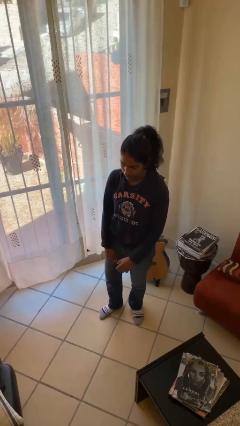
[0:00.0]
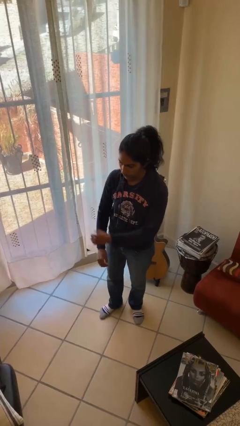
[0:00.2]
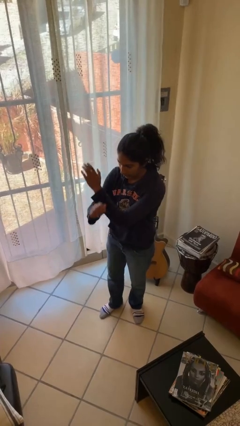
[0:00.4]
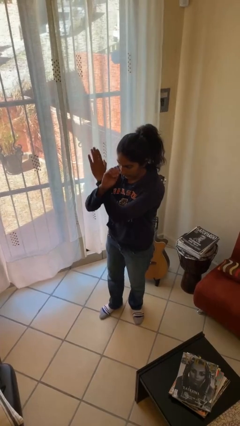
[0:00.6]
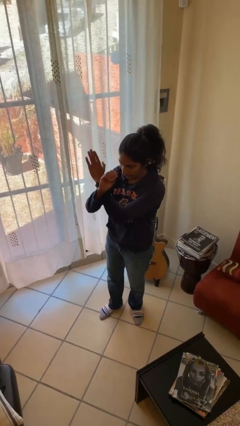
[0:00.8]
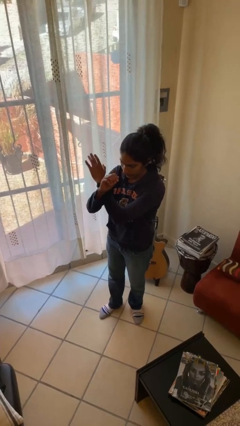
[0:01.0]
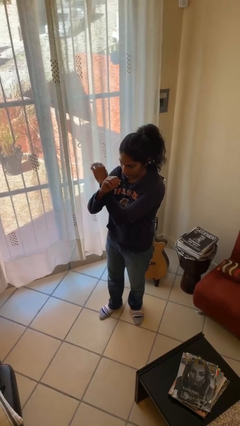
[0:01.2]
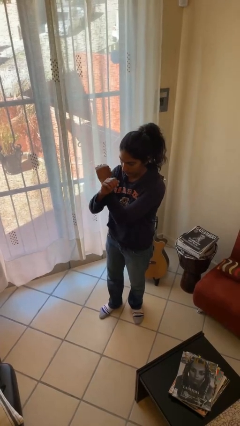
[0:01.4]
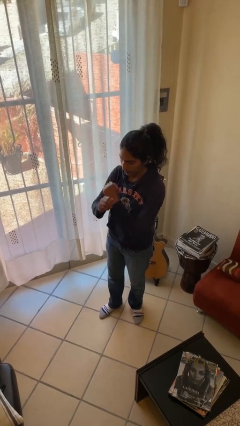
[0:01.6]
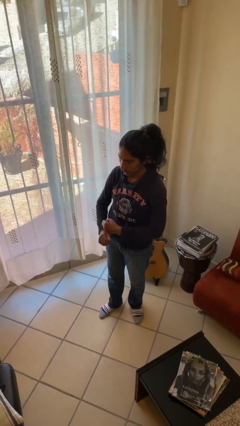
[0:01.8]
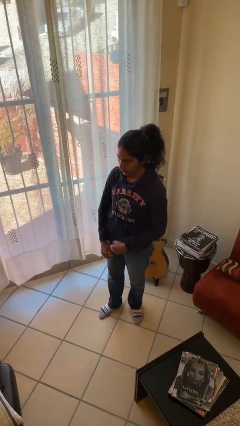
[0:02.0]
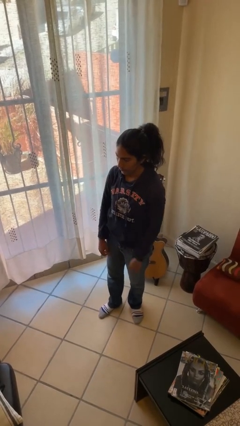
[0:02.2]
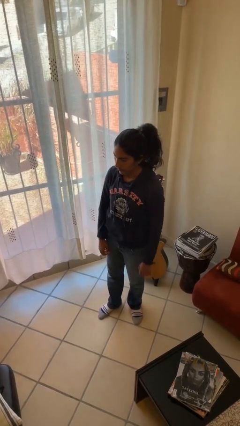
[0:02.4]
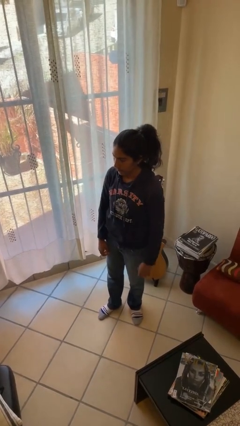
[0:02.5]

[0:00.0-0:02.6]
person gestures arms x

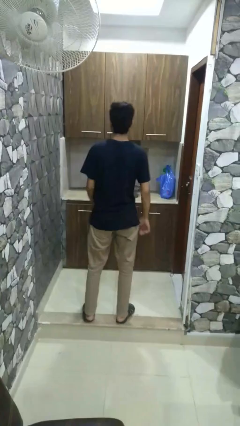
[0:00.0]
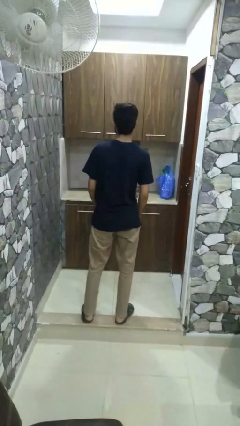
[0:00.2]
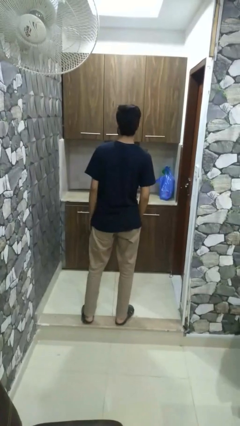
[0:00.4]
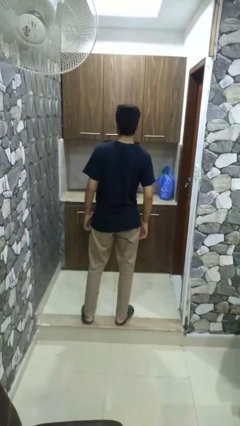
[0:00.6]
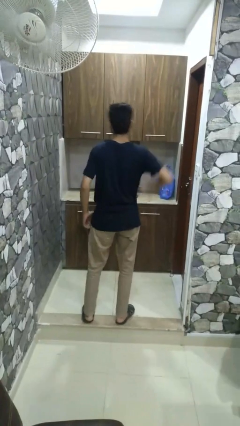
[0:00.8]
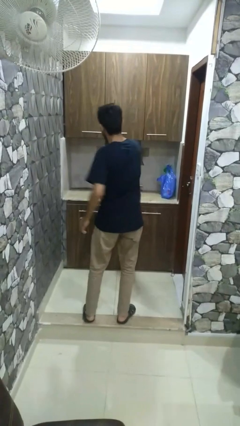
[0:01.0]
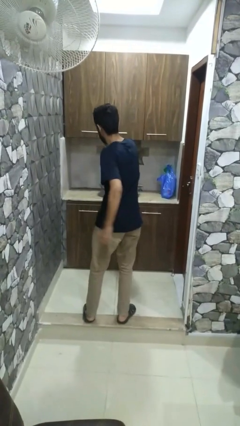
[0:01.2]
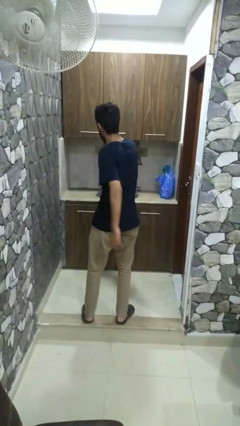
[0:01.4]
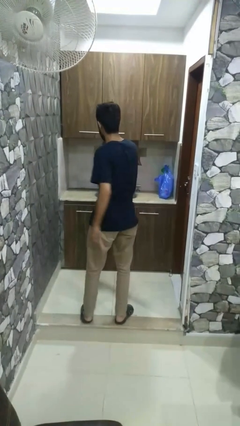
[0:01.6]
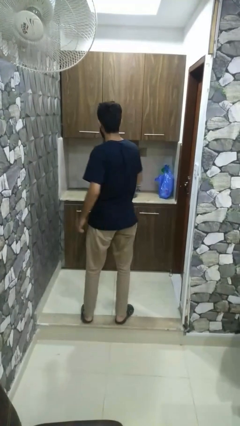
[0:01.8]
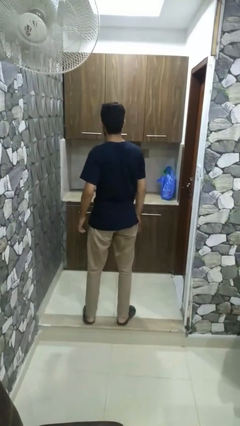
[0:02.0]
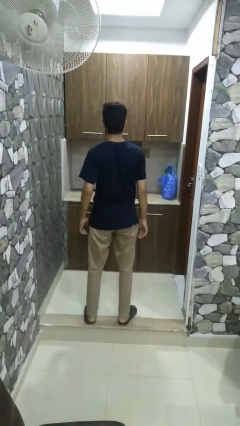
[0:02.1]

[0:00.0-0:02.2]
person karate chop

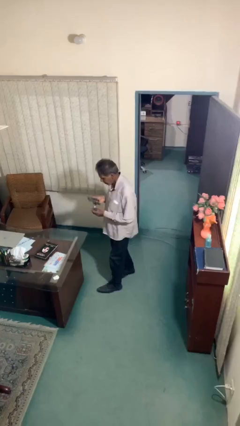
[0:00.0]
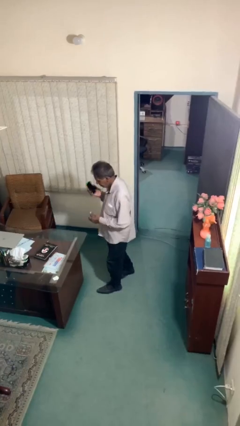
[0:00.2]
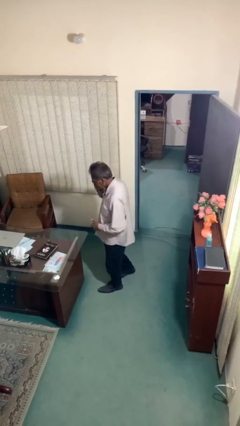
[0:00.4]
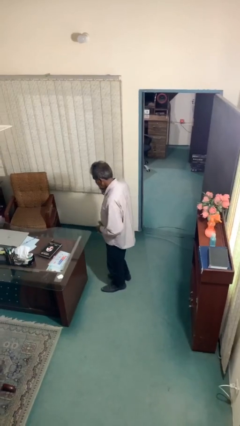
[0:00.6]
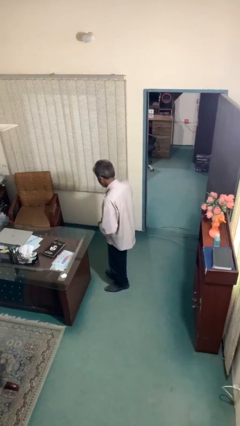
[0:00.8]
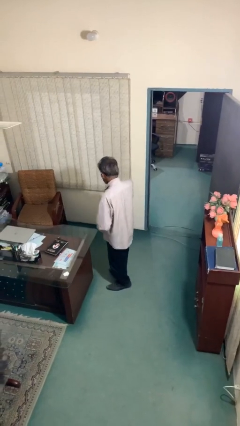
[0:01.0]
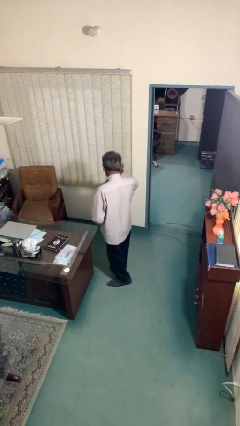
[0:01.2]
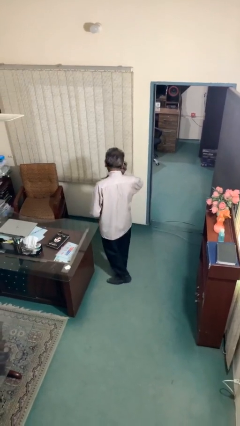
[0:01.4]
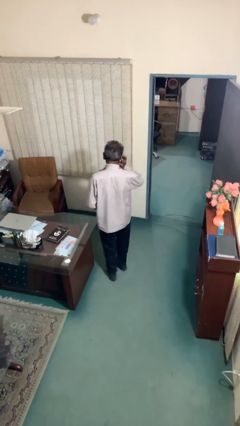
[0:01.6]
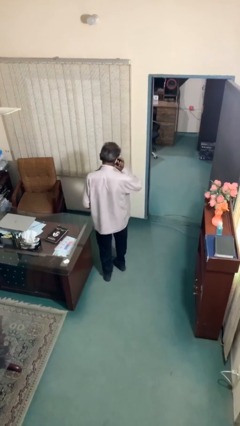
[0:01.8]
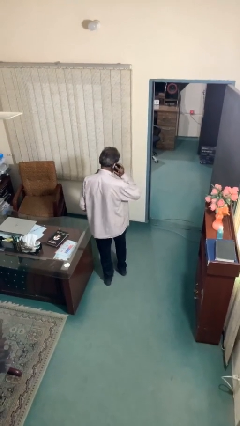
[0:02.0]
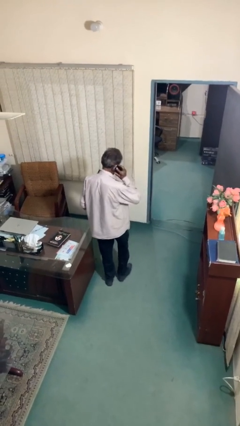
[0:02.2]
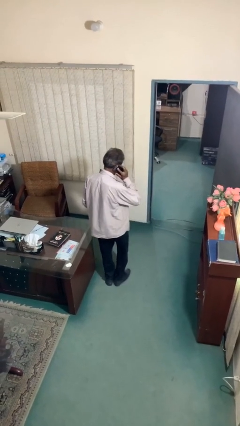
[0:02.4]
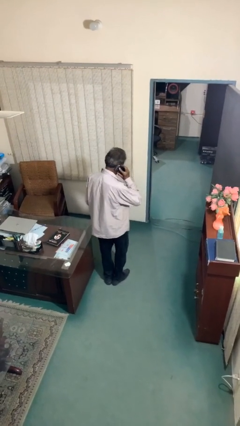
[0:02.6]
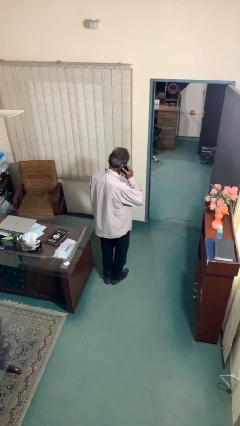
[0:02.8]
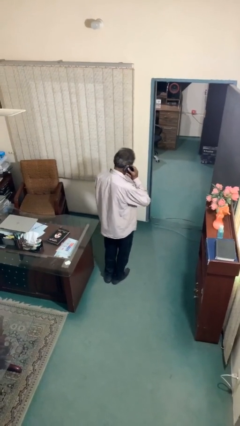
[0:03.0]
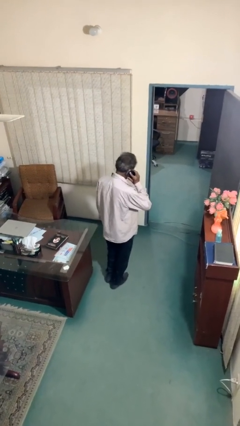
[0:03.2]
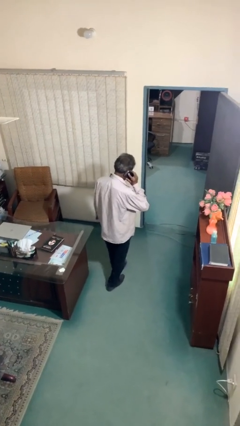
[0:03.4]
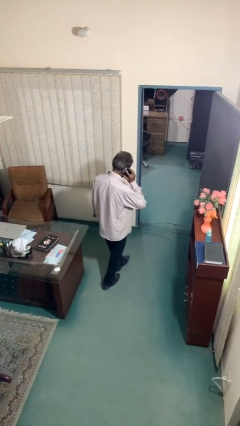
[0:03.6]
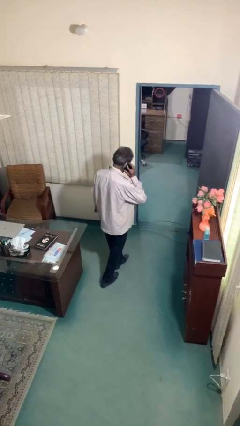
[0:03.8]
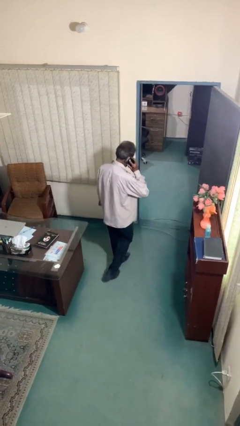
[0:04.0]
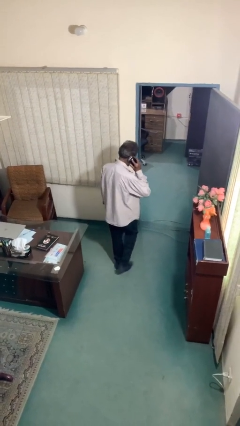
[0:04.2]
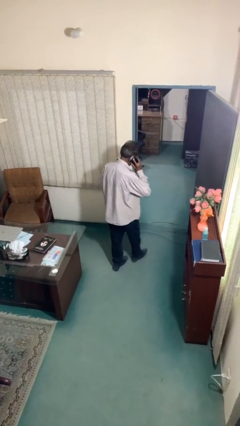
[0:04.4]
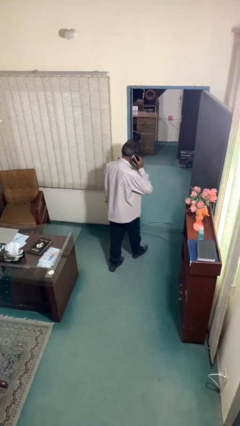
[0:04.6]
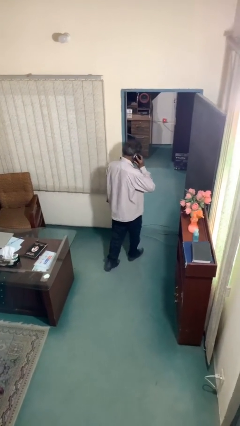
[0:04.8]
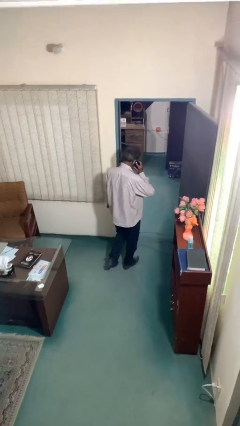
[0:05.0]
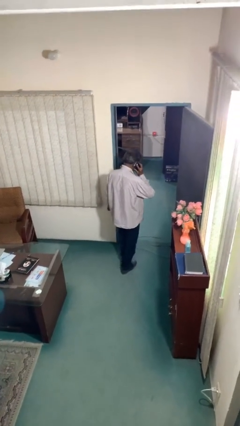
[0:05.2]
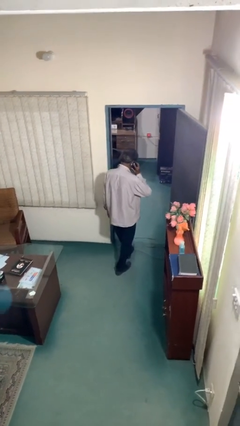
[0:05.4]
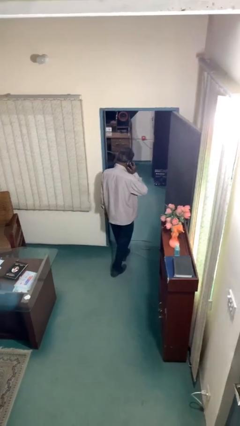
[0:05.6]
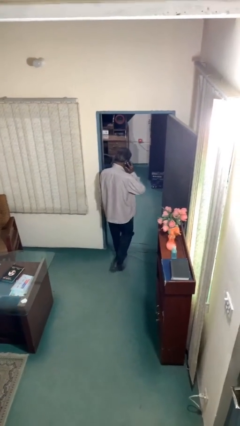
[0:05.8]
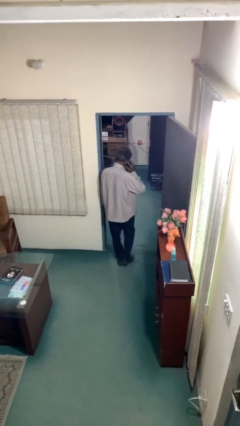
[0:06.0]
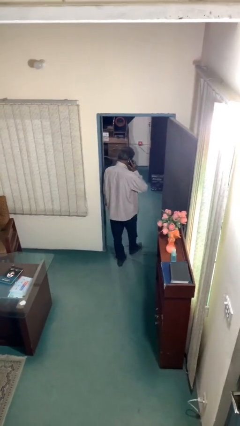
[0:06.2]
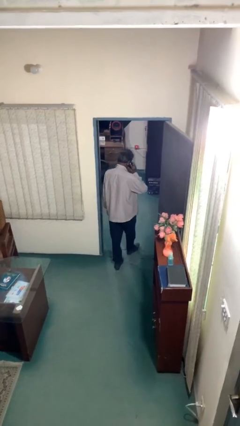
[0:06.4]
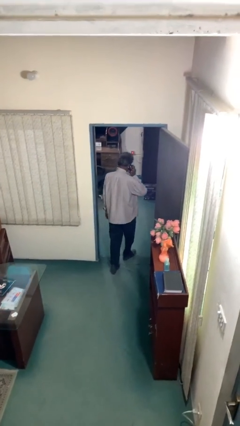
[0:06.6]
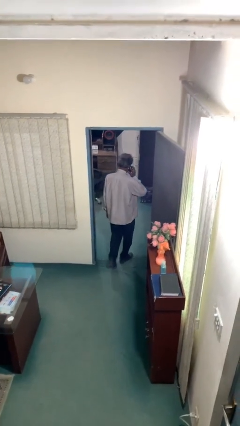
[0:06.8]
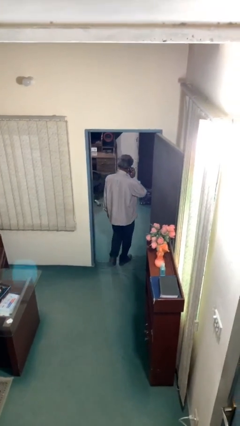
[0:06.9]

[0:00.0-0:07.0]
person talks on phone

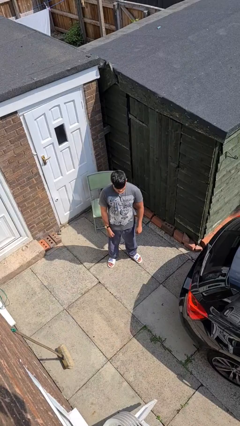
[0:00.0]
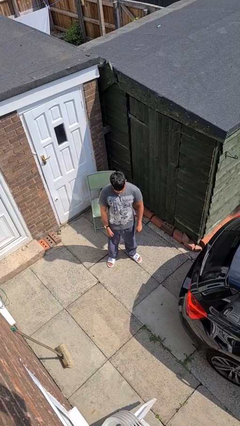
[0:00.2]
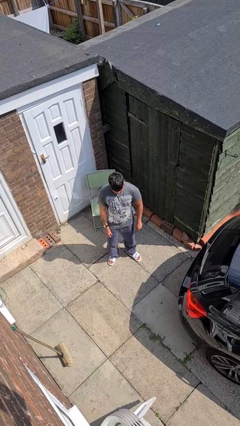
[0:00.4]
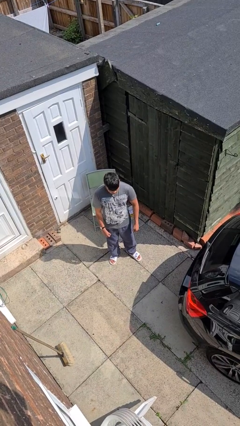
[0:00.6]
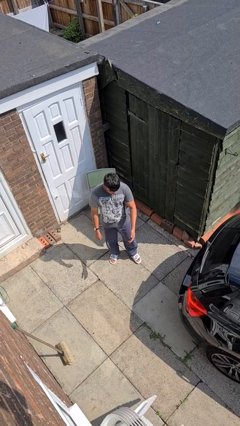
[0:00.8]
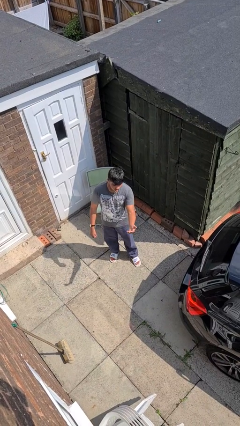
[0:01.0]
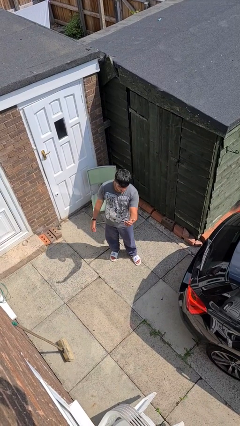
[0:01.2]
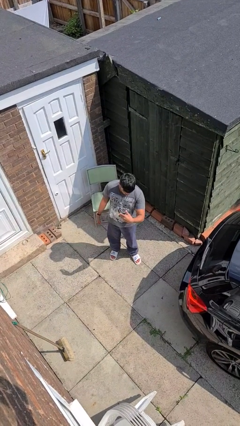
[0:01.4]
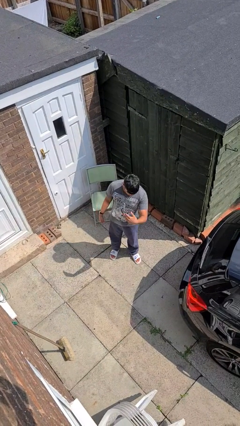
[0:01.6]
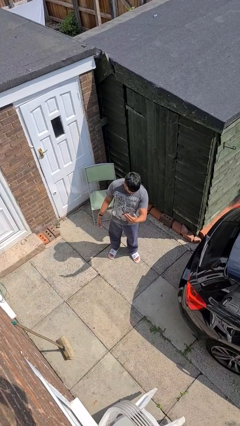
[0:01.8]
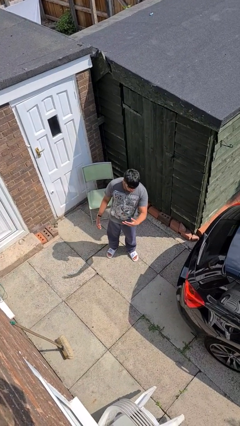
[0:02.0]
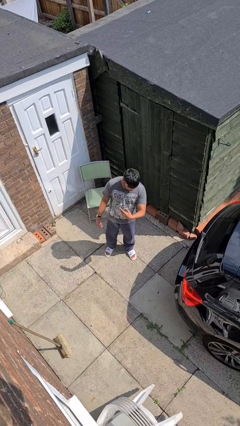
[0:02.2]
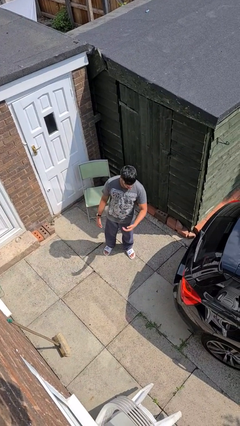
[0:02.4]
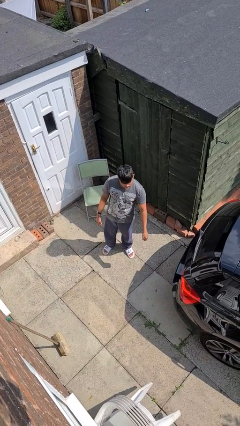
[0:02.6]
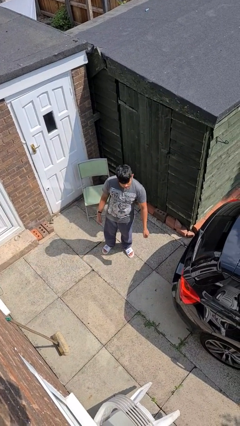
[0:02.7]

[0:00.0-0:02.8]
person gestures come here

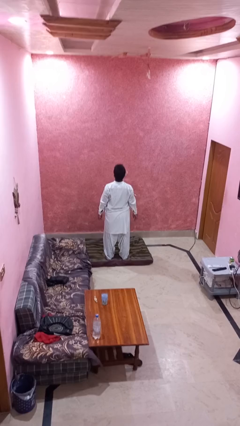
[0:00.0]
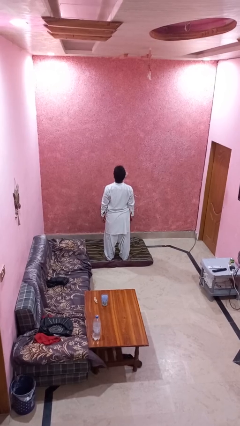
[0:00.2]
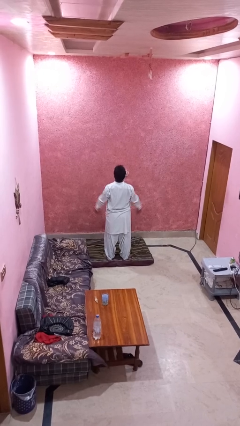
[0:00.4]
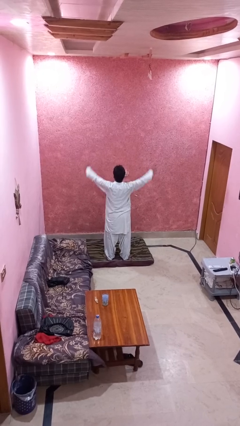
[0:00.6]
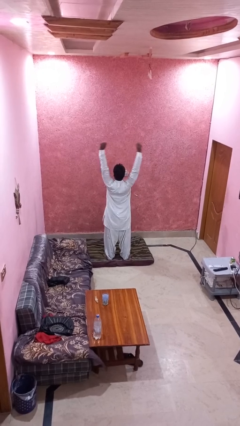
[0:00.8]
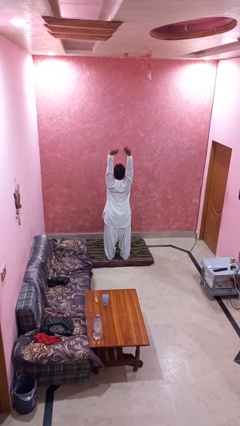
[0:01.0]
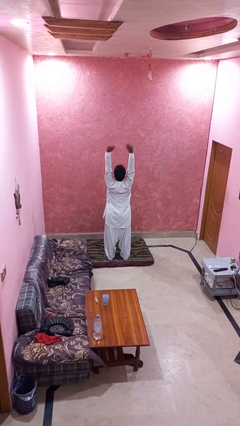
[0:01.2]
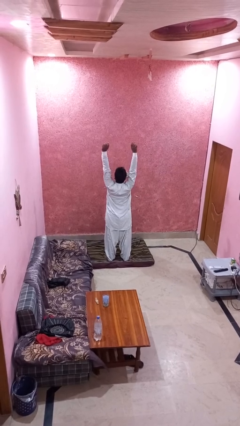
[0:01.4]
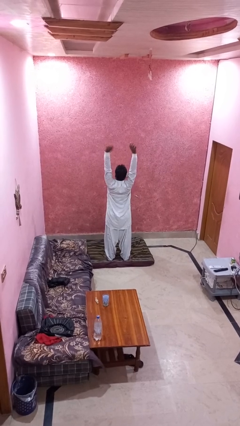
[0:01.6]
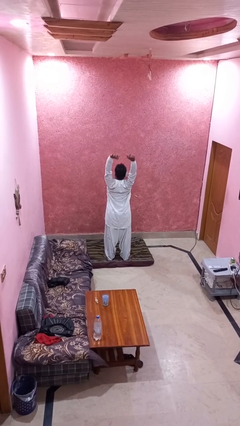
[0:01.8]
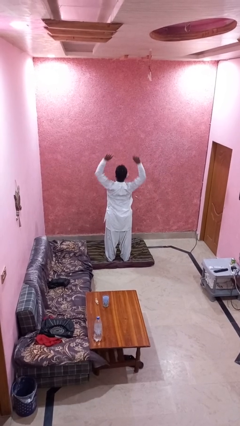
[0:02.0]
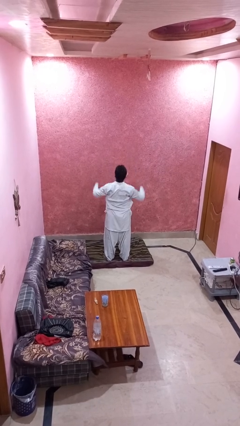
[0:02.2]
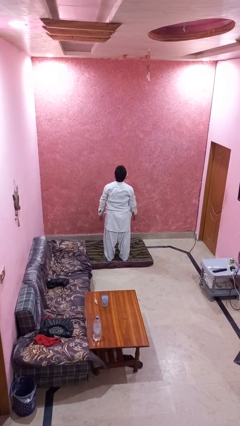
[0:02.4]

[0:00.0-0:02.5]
person stretches arms over head

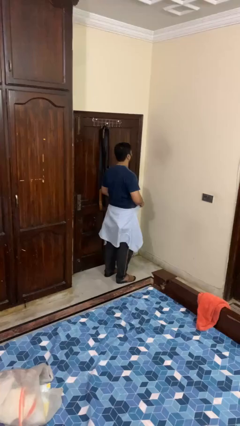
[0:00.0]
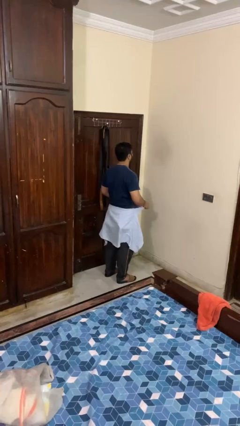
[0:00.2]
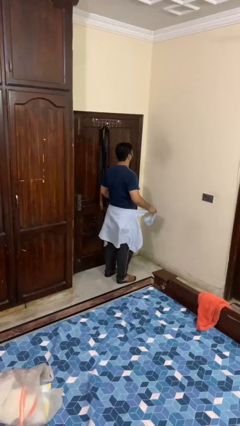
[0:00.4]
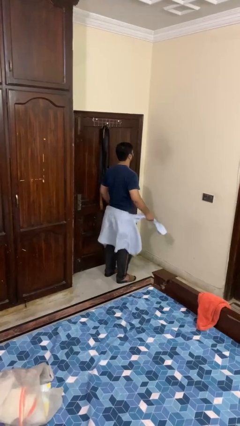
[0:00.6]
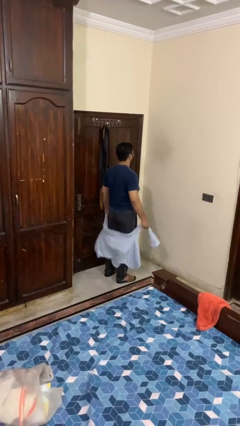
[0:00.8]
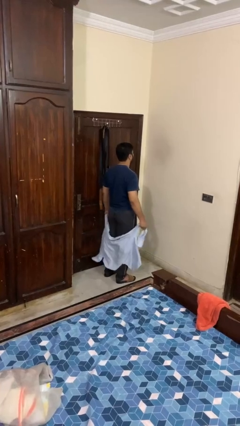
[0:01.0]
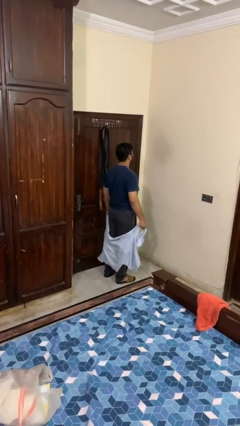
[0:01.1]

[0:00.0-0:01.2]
person unties jacket around waist
